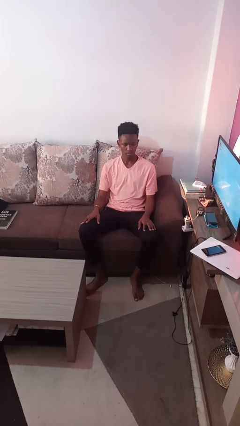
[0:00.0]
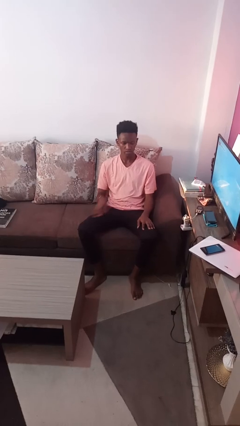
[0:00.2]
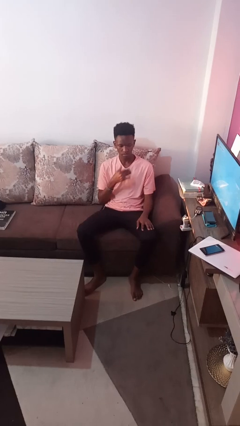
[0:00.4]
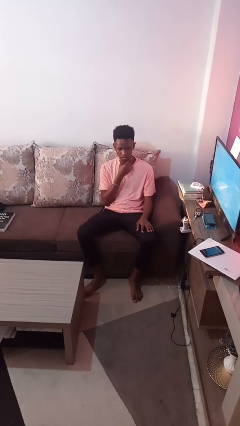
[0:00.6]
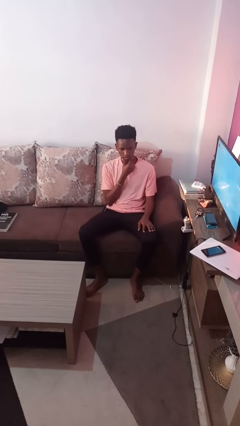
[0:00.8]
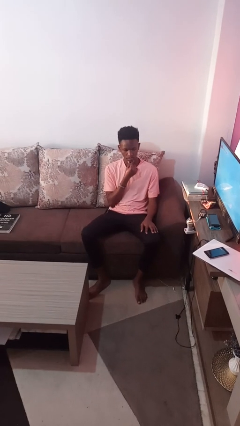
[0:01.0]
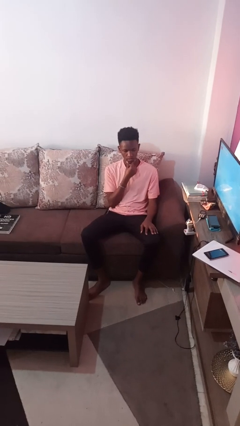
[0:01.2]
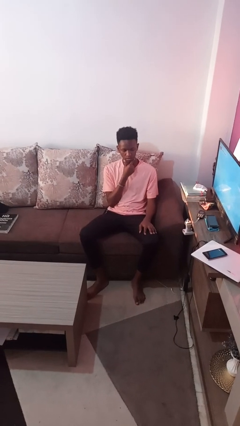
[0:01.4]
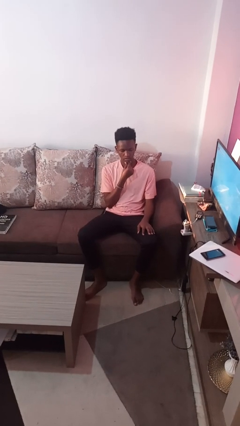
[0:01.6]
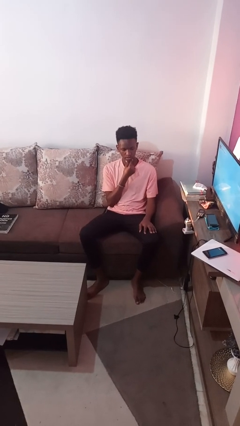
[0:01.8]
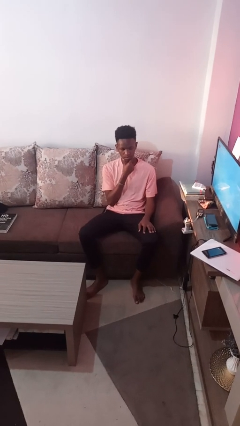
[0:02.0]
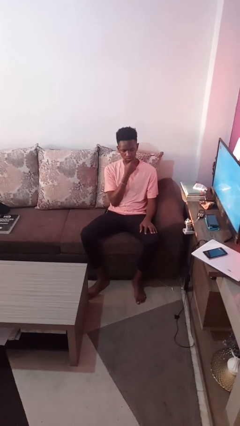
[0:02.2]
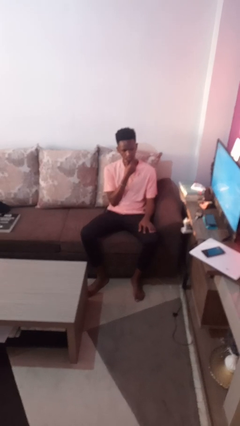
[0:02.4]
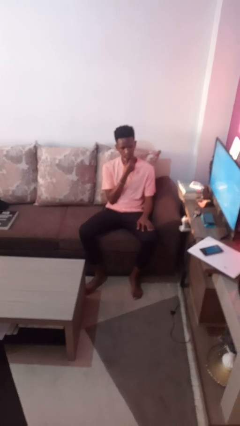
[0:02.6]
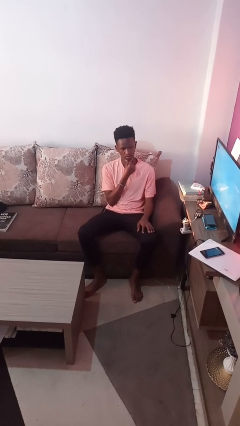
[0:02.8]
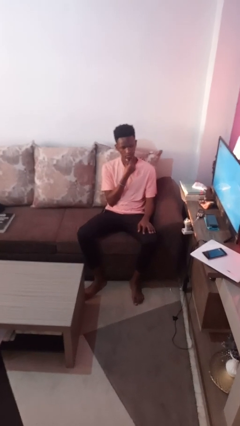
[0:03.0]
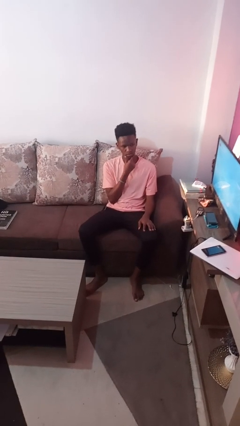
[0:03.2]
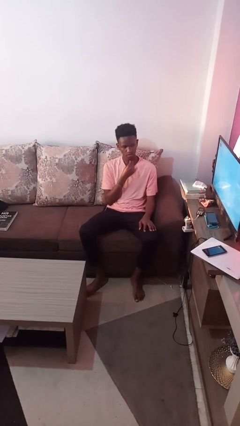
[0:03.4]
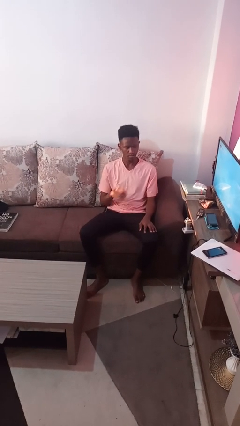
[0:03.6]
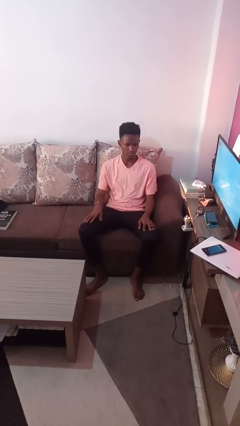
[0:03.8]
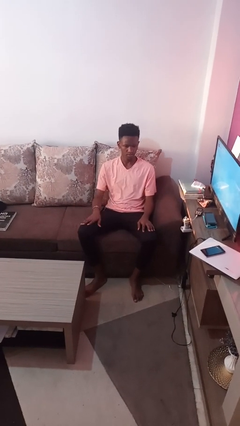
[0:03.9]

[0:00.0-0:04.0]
person strokes chin

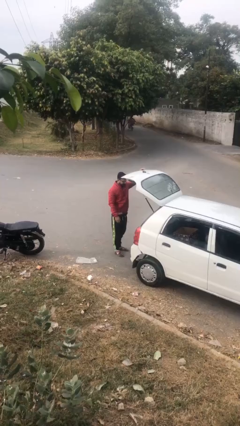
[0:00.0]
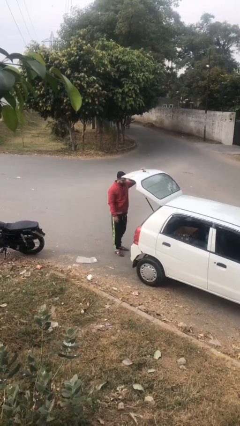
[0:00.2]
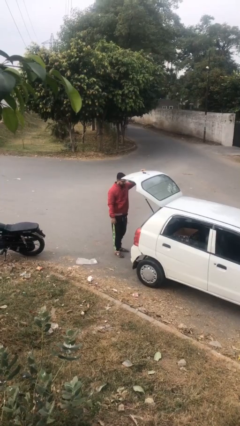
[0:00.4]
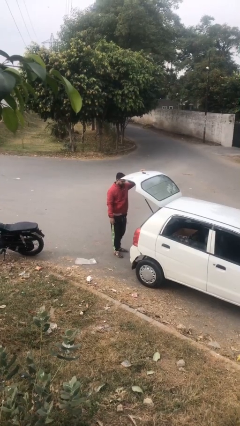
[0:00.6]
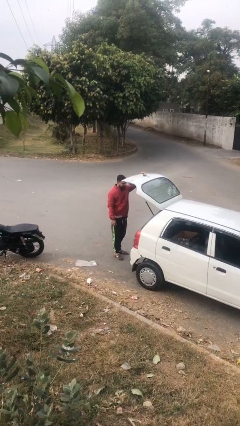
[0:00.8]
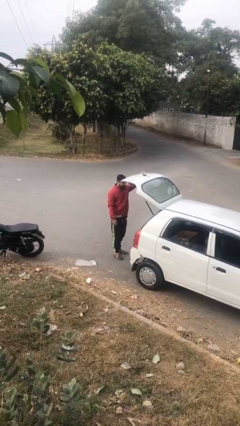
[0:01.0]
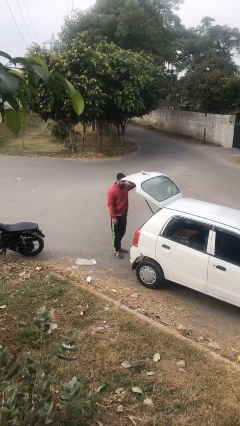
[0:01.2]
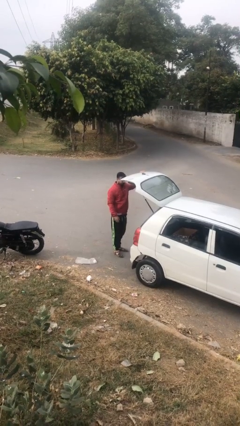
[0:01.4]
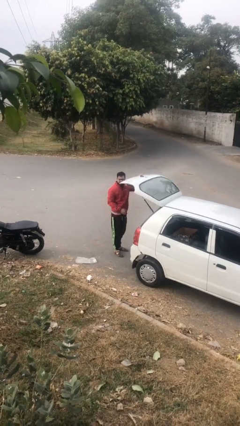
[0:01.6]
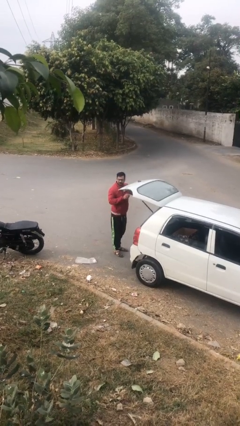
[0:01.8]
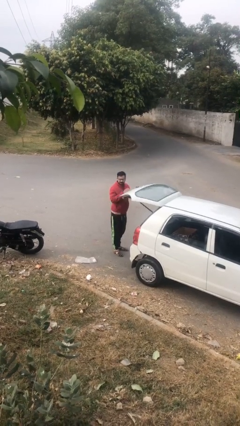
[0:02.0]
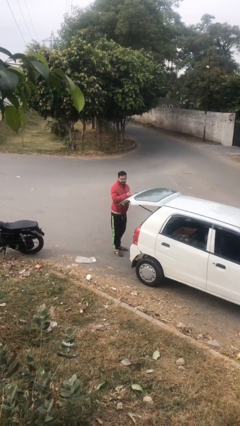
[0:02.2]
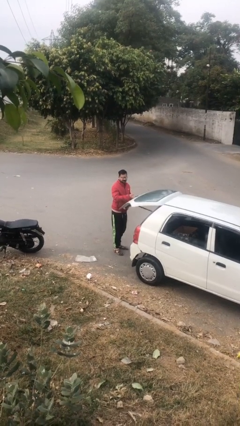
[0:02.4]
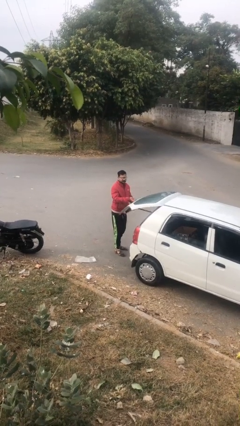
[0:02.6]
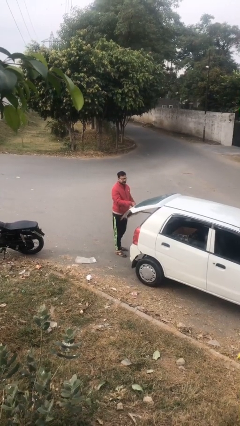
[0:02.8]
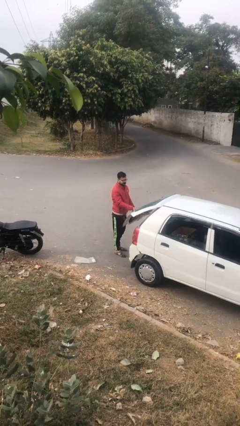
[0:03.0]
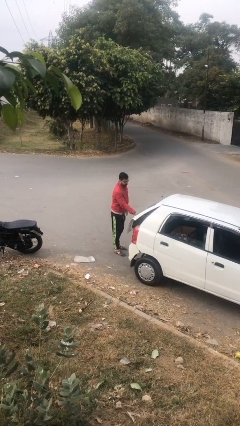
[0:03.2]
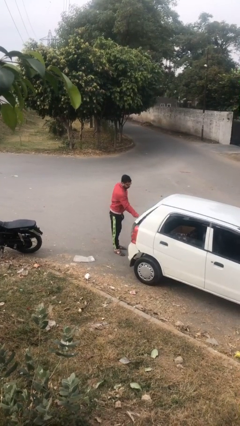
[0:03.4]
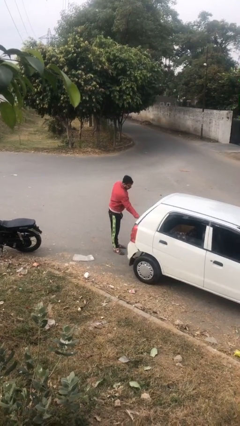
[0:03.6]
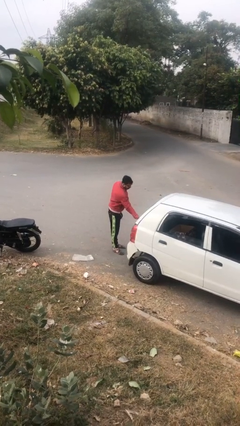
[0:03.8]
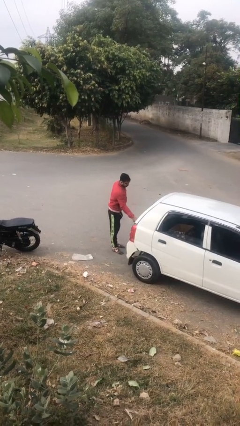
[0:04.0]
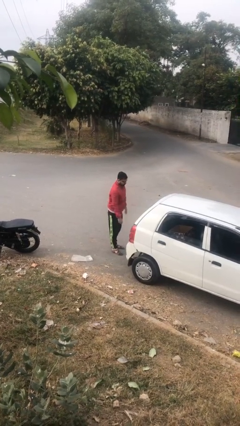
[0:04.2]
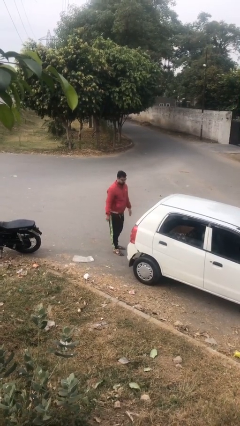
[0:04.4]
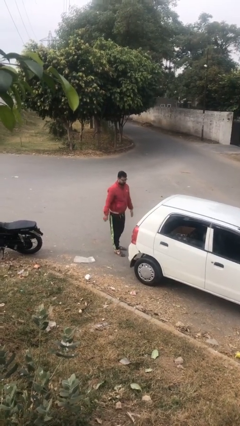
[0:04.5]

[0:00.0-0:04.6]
person closes car trunk

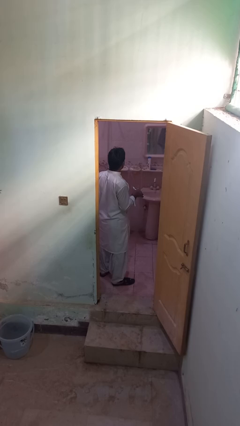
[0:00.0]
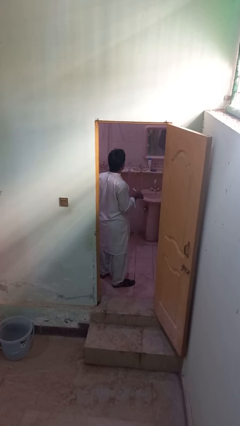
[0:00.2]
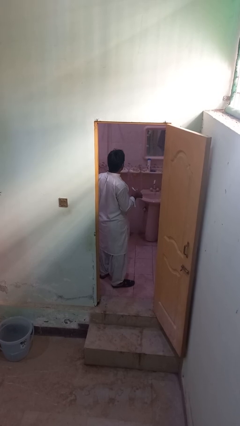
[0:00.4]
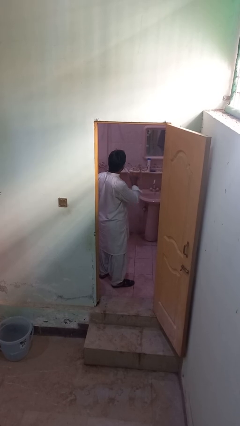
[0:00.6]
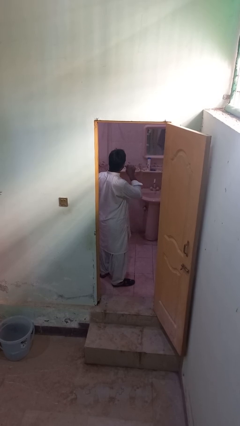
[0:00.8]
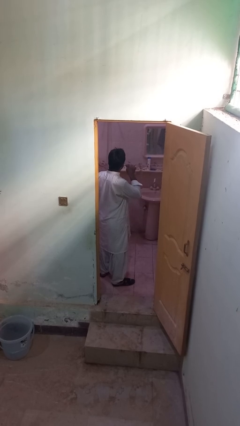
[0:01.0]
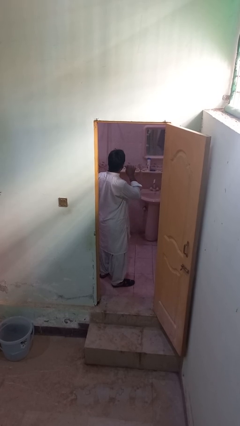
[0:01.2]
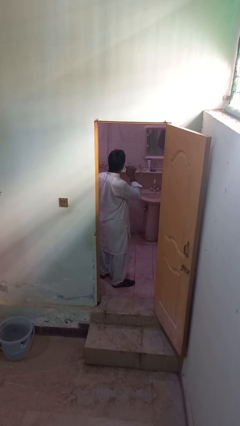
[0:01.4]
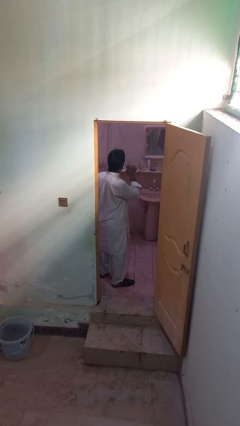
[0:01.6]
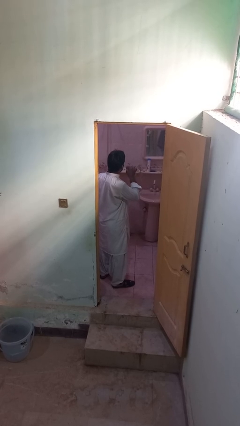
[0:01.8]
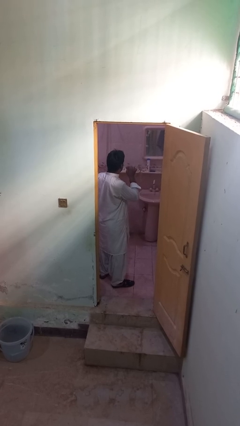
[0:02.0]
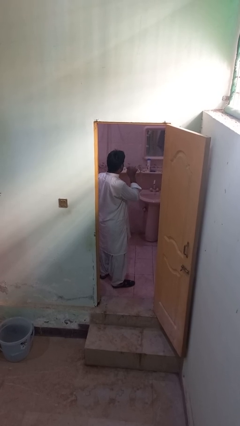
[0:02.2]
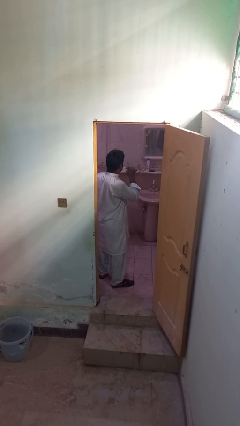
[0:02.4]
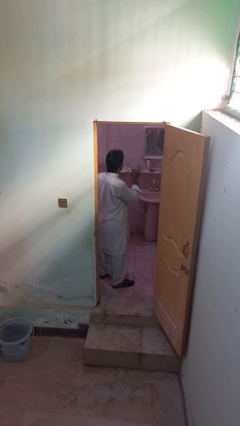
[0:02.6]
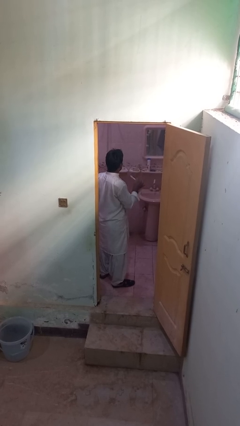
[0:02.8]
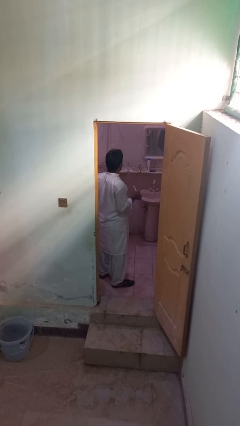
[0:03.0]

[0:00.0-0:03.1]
person brushes teeth

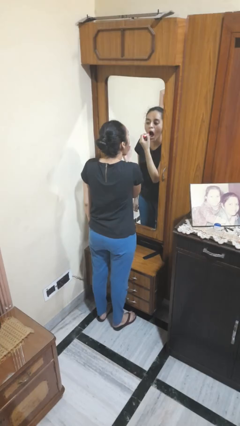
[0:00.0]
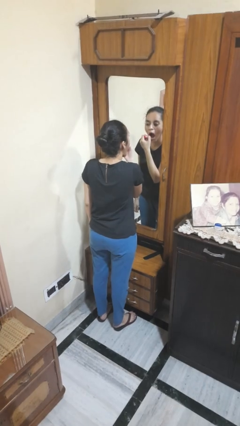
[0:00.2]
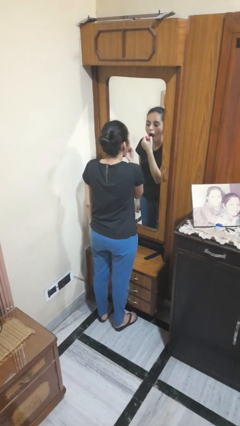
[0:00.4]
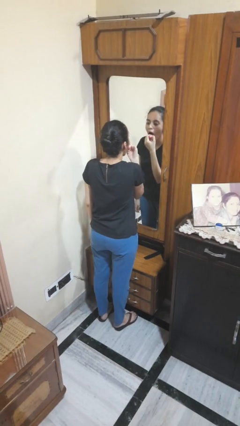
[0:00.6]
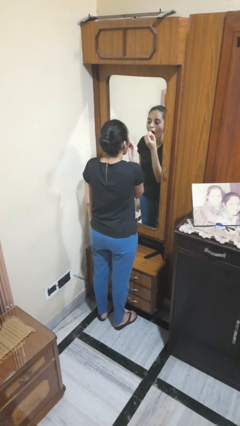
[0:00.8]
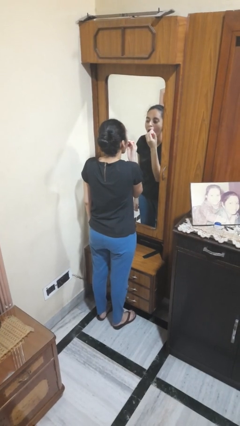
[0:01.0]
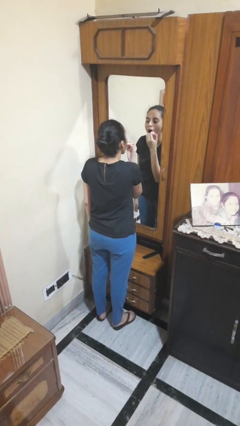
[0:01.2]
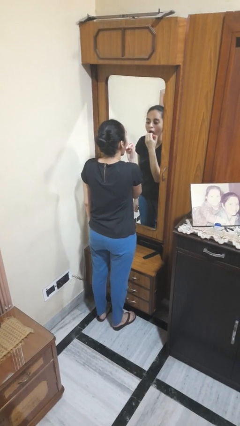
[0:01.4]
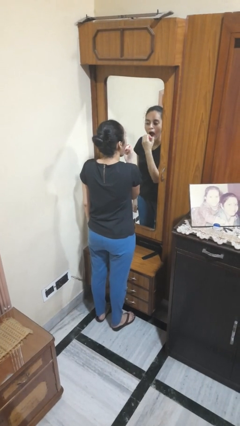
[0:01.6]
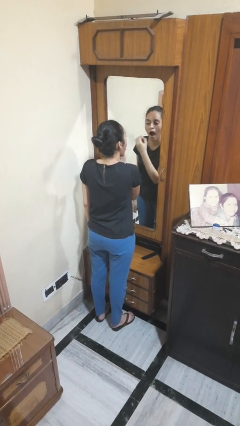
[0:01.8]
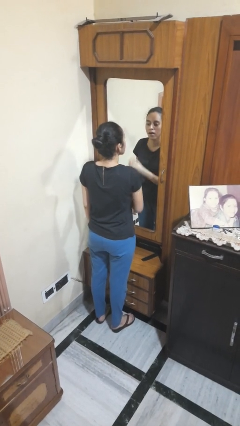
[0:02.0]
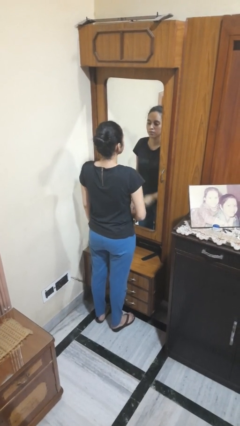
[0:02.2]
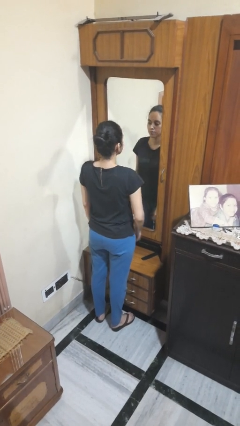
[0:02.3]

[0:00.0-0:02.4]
person applies lip makeup

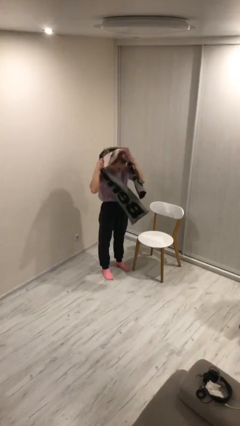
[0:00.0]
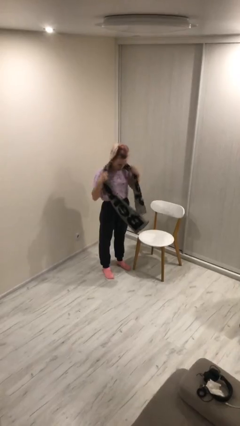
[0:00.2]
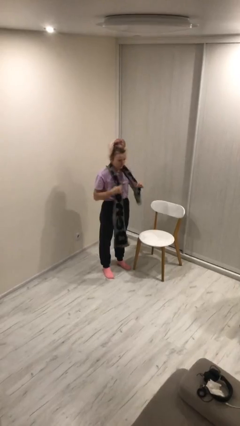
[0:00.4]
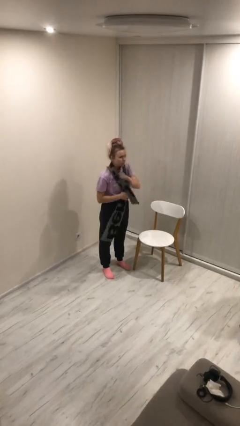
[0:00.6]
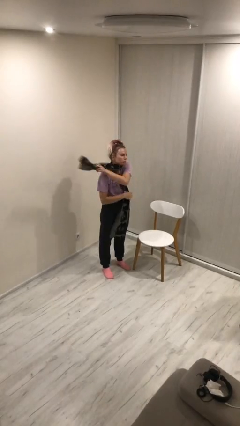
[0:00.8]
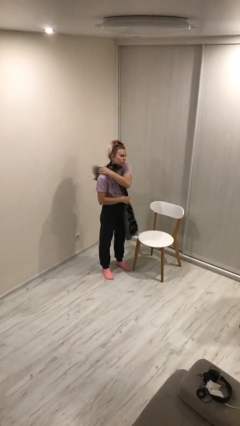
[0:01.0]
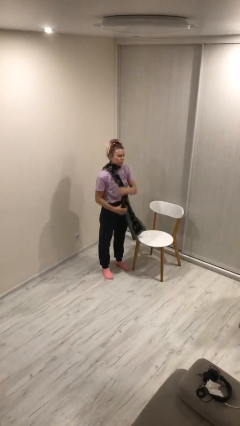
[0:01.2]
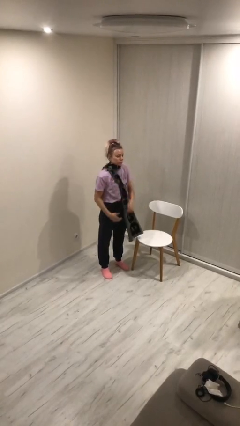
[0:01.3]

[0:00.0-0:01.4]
person puts on scarf

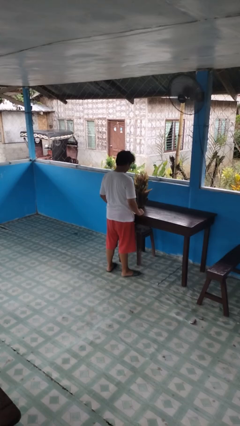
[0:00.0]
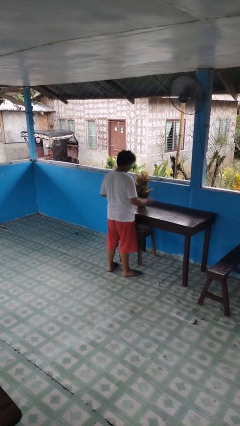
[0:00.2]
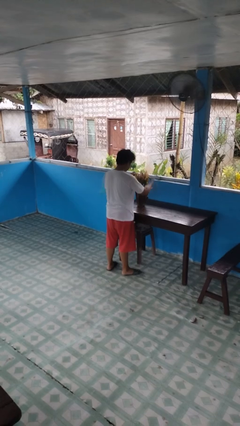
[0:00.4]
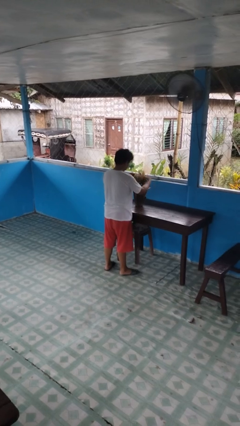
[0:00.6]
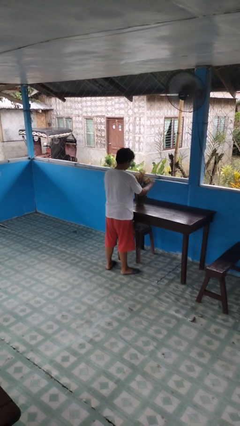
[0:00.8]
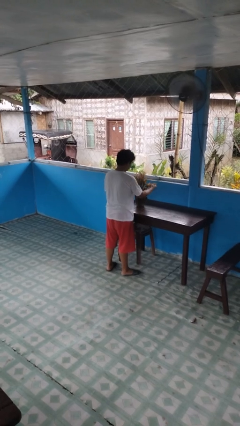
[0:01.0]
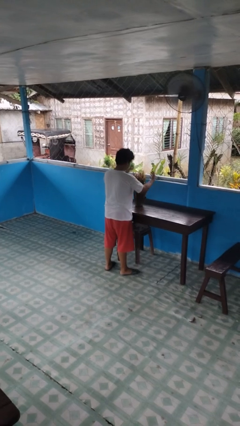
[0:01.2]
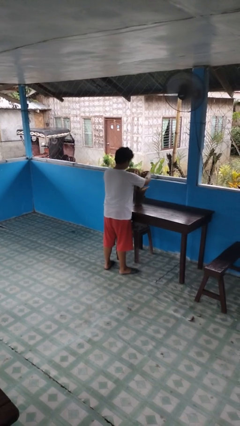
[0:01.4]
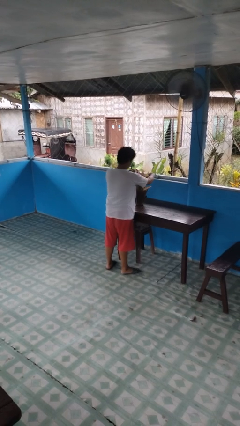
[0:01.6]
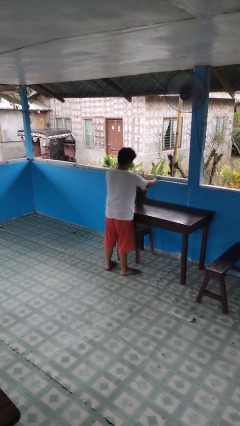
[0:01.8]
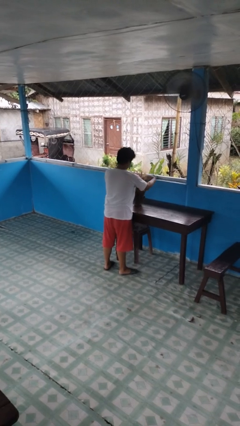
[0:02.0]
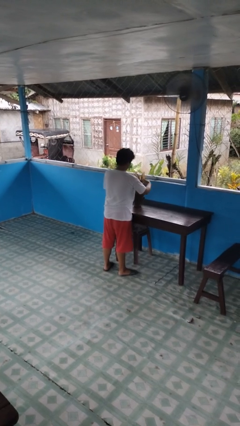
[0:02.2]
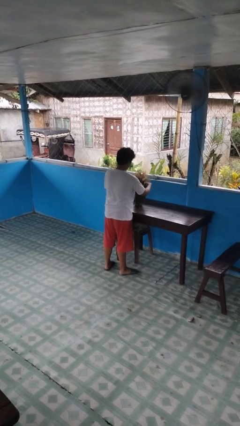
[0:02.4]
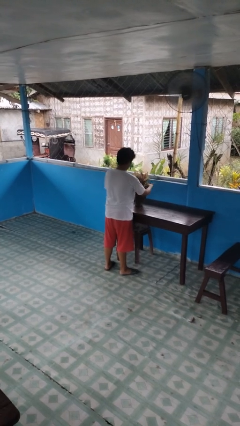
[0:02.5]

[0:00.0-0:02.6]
person arranges flowers in vase
